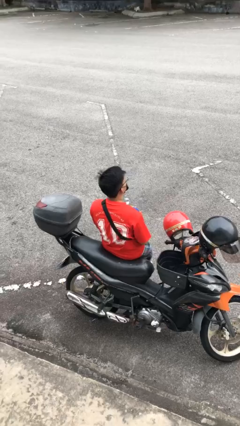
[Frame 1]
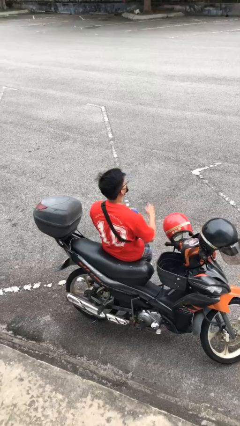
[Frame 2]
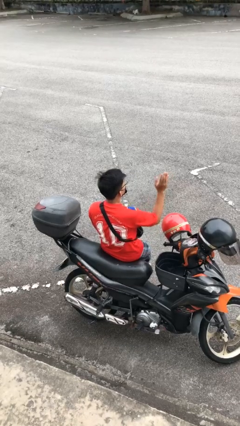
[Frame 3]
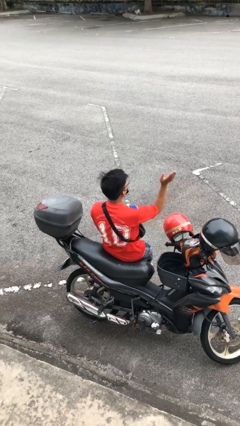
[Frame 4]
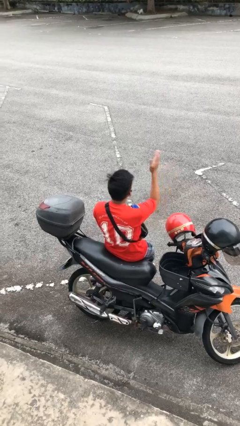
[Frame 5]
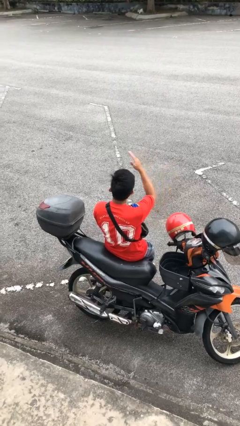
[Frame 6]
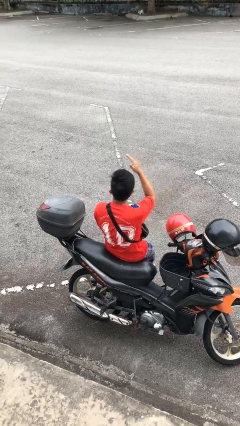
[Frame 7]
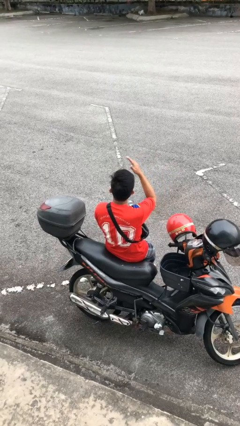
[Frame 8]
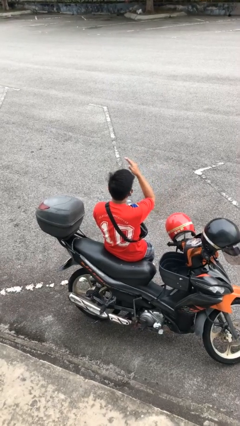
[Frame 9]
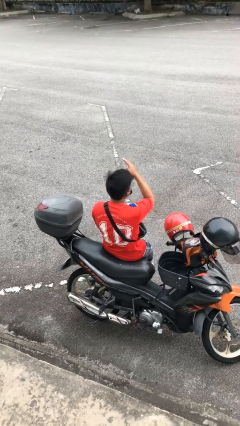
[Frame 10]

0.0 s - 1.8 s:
person gestures swipe left

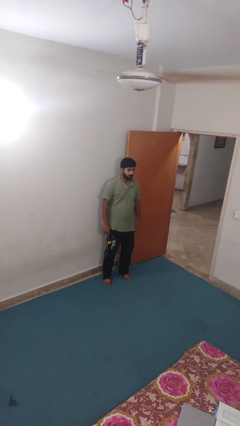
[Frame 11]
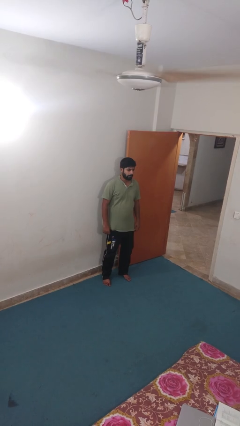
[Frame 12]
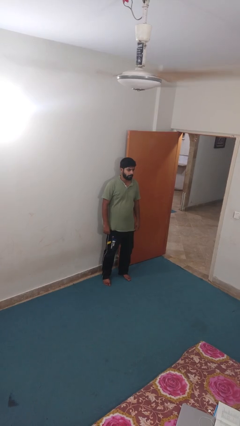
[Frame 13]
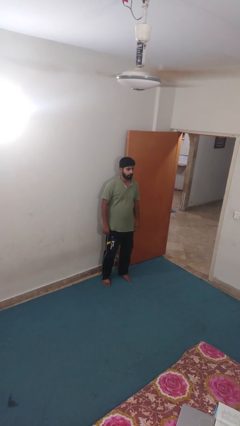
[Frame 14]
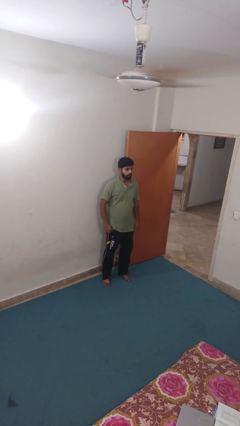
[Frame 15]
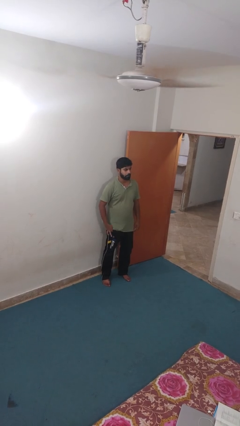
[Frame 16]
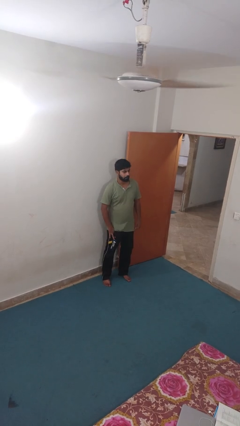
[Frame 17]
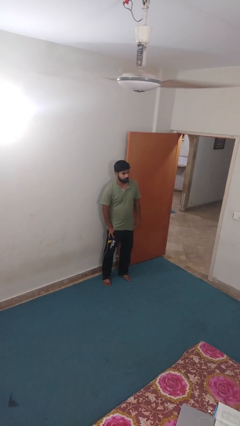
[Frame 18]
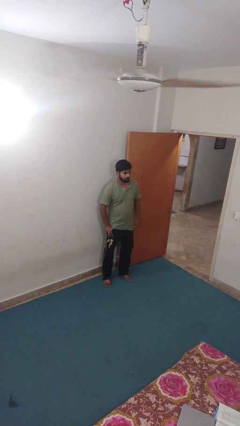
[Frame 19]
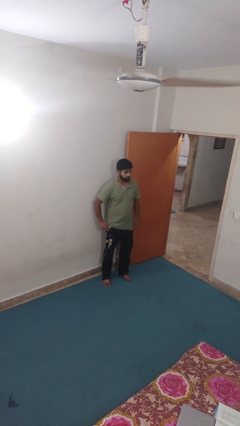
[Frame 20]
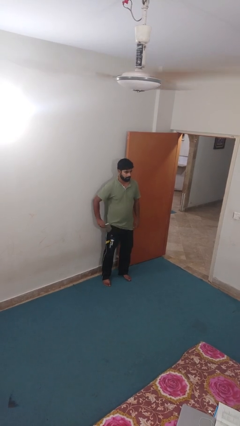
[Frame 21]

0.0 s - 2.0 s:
person takes phone from pocket

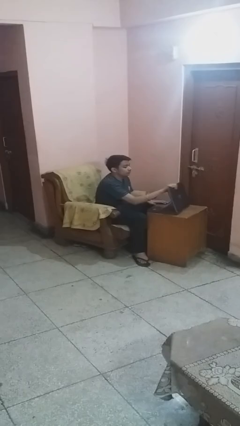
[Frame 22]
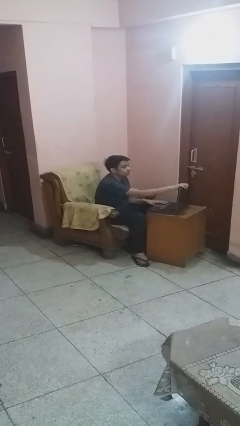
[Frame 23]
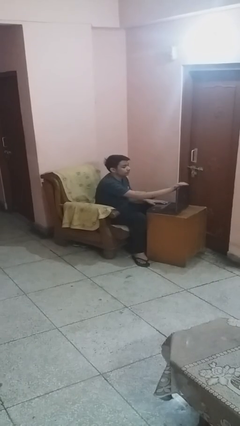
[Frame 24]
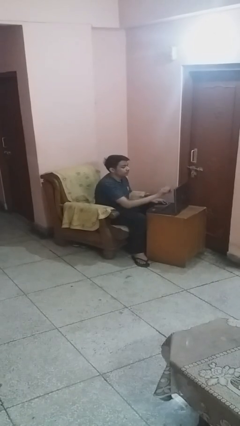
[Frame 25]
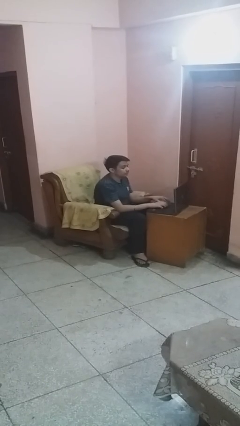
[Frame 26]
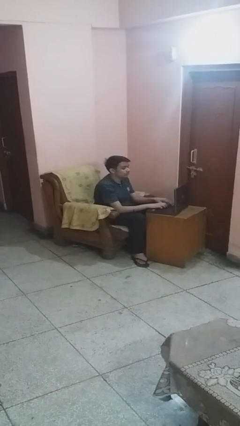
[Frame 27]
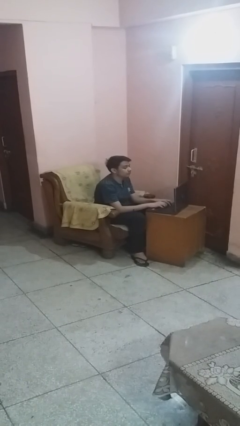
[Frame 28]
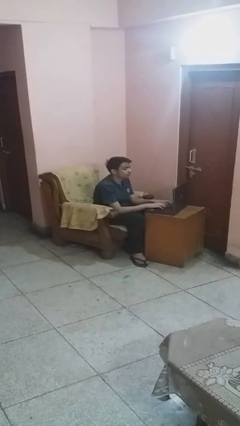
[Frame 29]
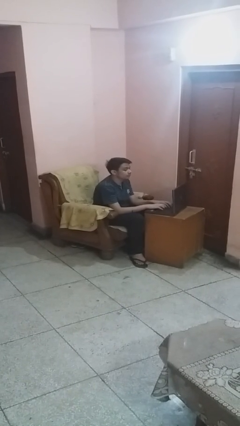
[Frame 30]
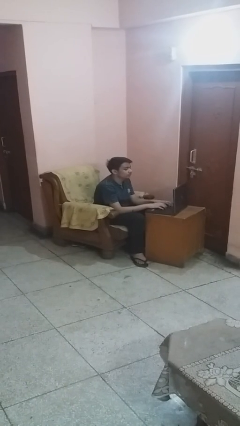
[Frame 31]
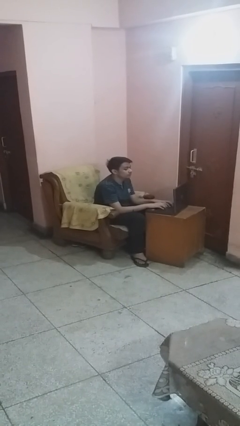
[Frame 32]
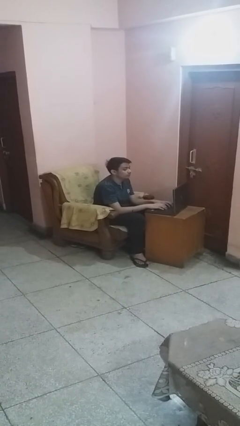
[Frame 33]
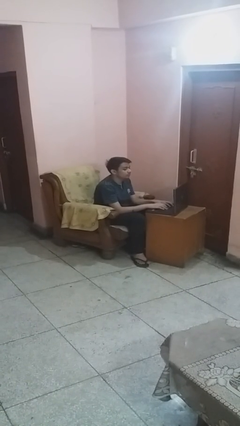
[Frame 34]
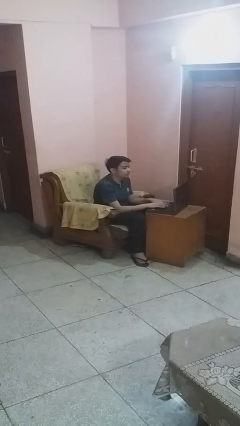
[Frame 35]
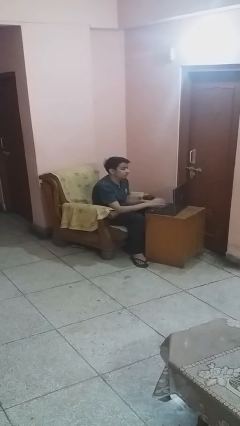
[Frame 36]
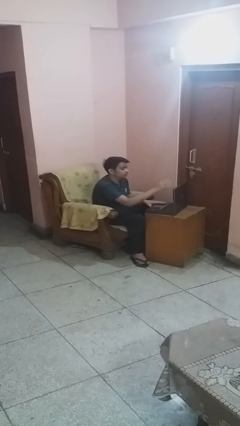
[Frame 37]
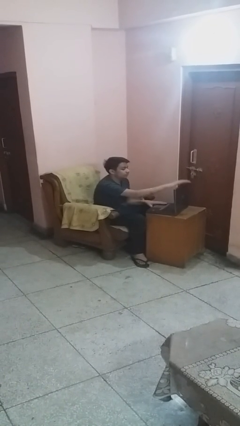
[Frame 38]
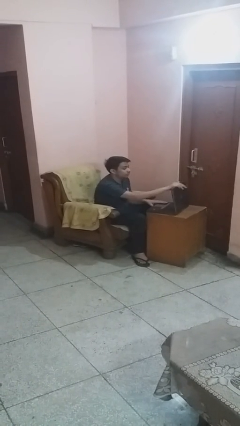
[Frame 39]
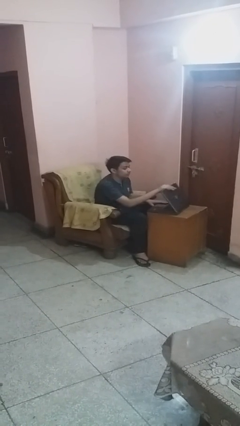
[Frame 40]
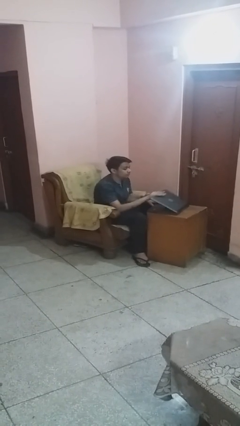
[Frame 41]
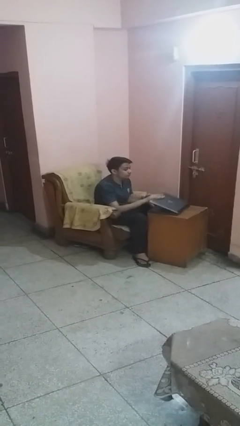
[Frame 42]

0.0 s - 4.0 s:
person interacts with laptop

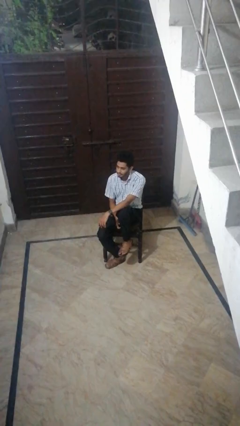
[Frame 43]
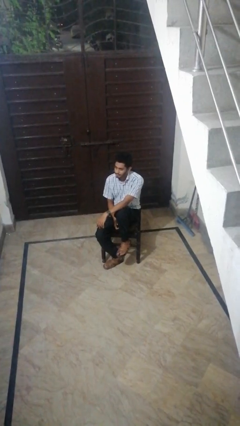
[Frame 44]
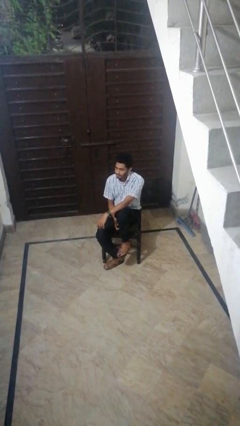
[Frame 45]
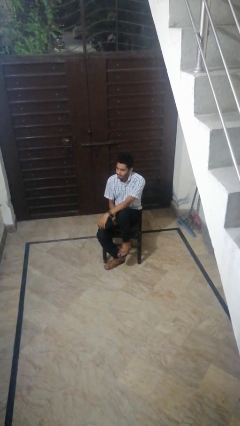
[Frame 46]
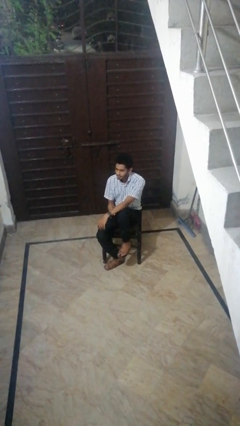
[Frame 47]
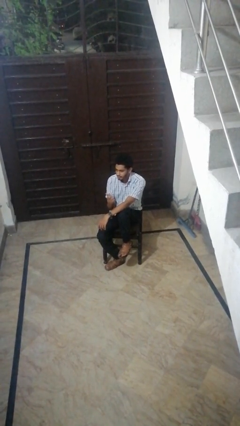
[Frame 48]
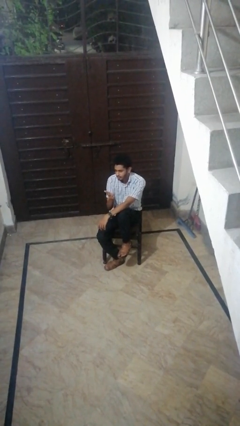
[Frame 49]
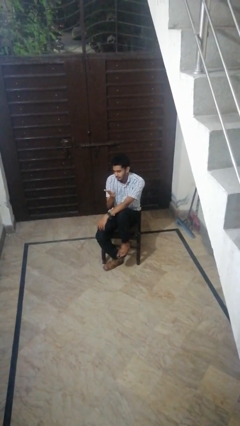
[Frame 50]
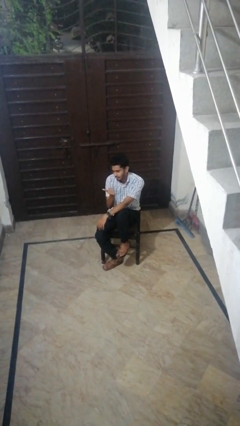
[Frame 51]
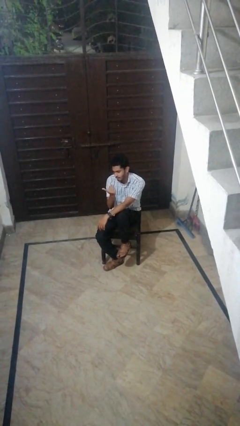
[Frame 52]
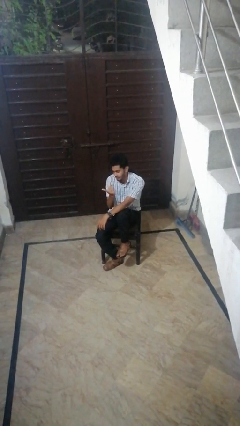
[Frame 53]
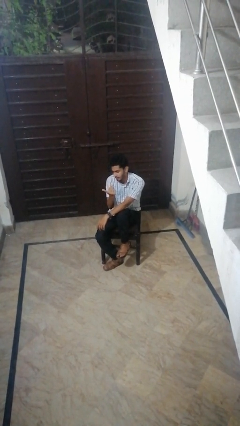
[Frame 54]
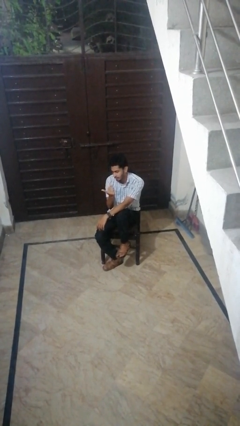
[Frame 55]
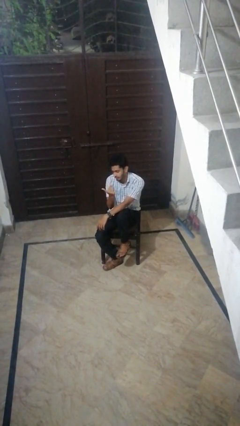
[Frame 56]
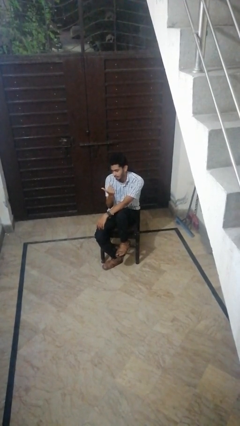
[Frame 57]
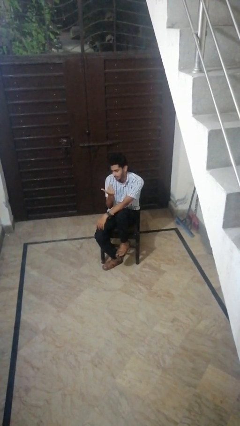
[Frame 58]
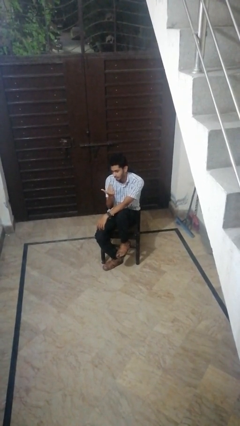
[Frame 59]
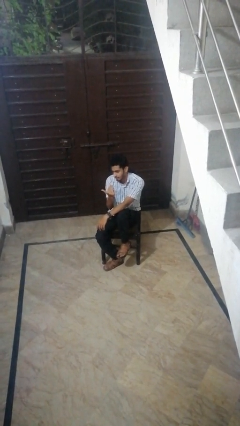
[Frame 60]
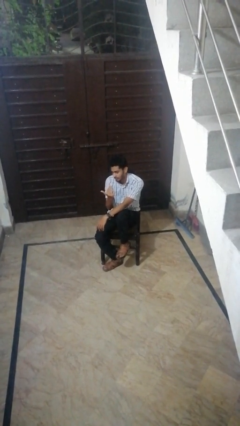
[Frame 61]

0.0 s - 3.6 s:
person gestures come here

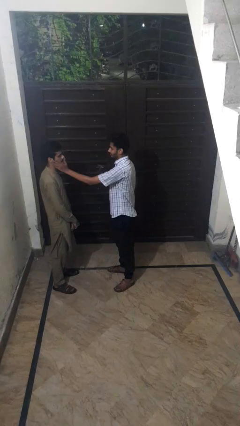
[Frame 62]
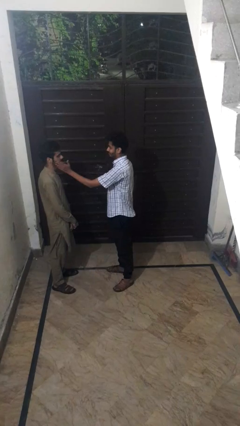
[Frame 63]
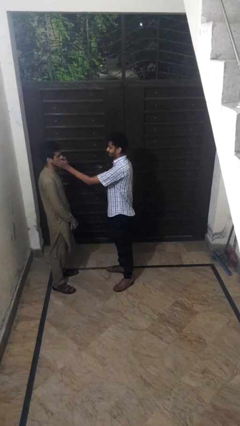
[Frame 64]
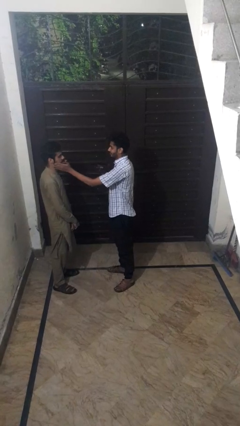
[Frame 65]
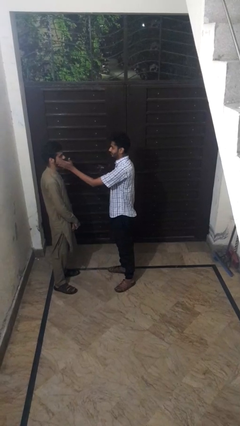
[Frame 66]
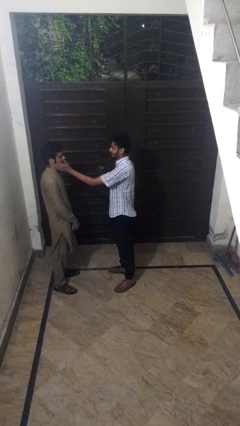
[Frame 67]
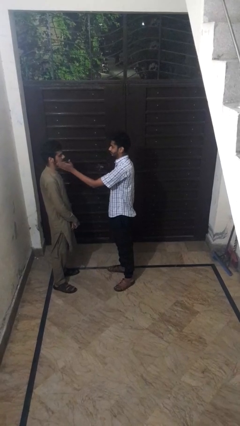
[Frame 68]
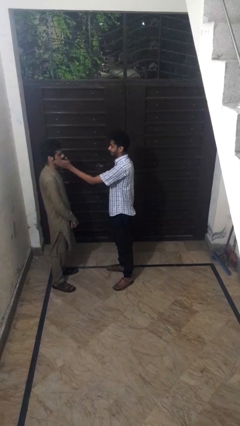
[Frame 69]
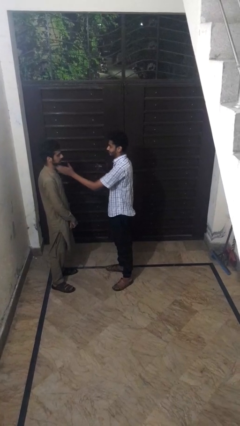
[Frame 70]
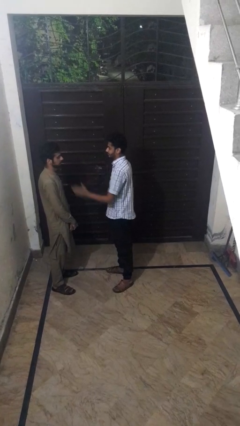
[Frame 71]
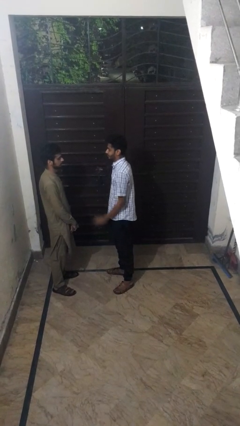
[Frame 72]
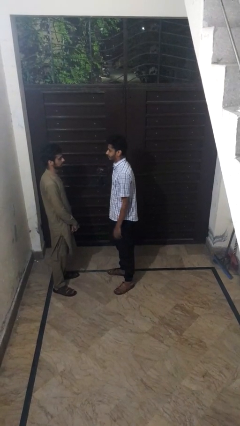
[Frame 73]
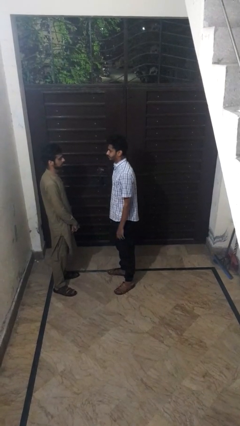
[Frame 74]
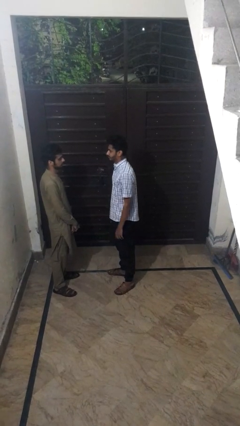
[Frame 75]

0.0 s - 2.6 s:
person touches face of person

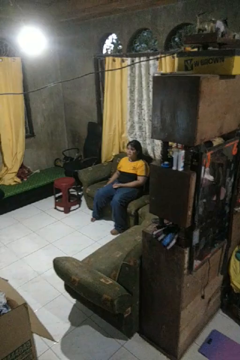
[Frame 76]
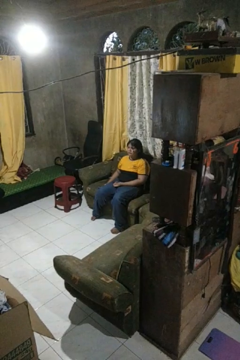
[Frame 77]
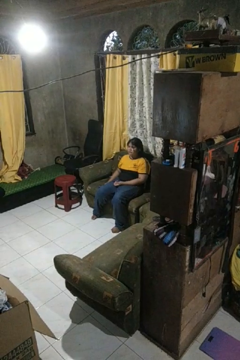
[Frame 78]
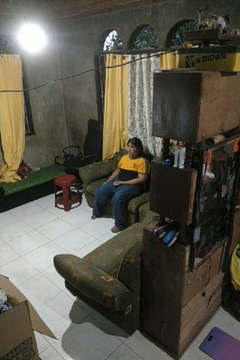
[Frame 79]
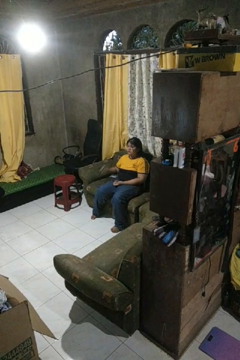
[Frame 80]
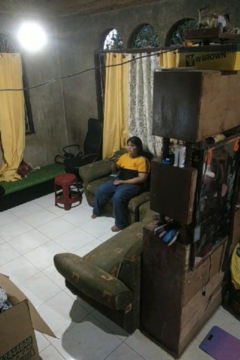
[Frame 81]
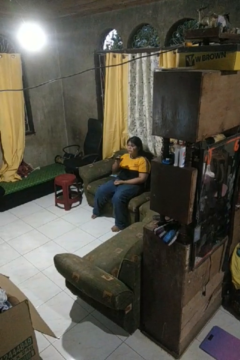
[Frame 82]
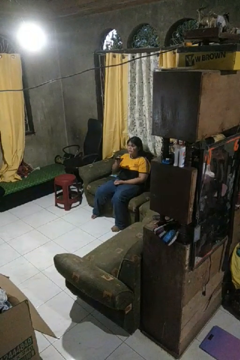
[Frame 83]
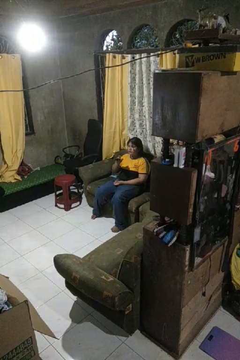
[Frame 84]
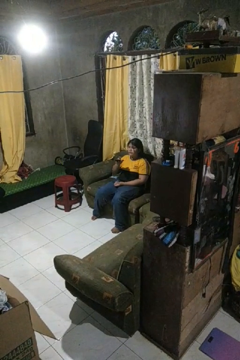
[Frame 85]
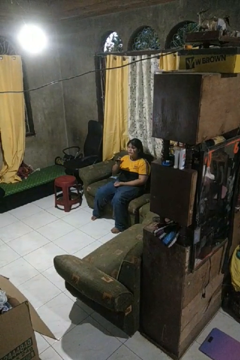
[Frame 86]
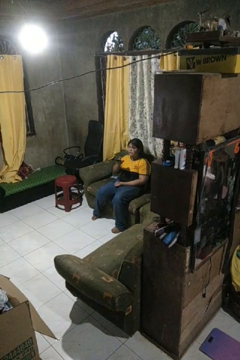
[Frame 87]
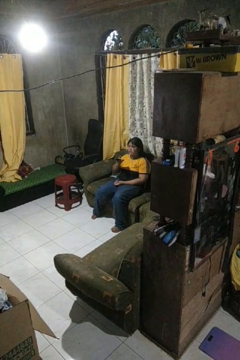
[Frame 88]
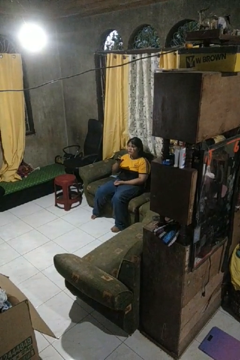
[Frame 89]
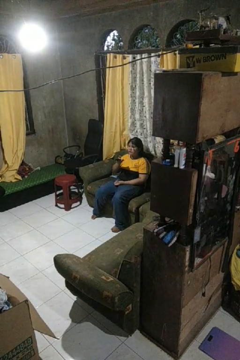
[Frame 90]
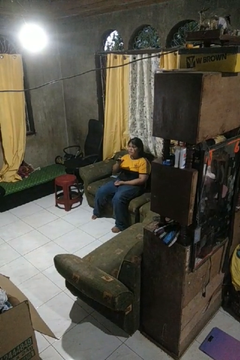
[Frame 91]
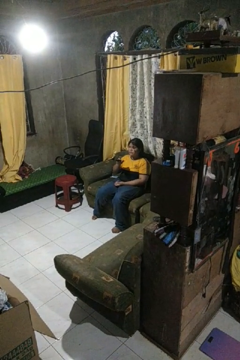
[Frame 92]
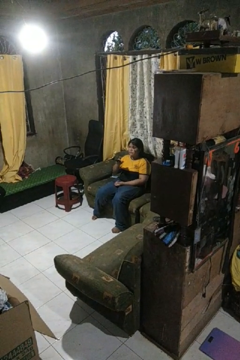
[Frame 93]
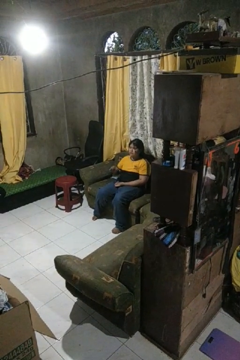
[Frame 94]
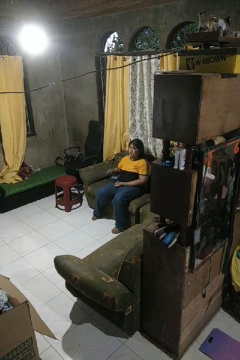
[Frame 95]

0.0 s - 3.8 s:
person uses television remote
